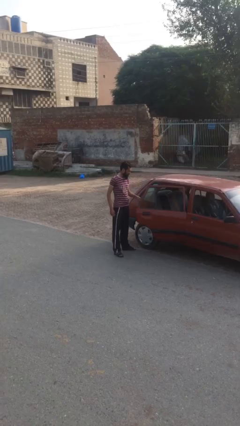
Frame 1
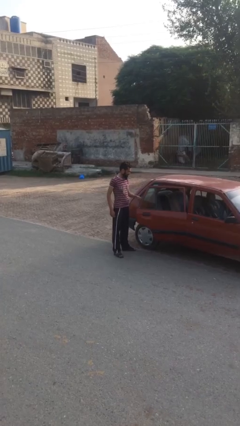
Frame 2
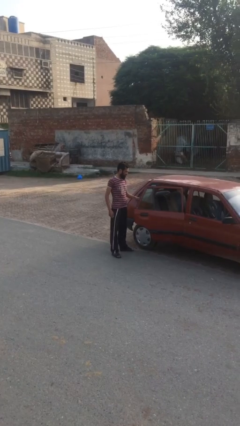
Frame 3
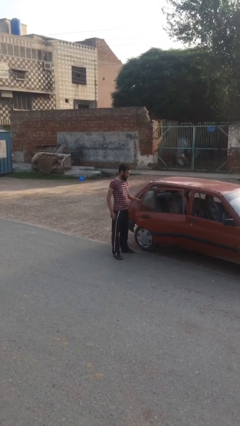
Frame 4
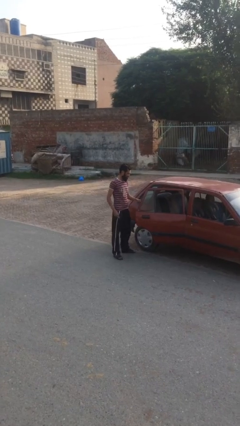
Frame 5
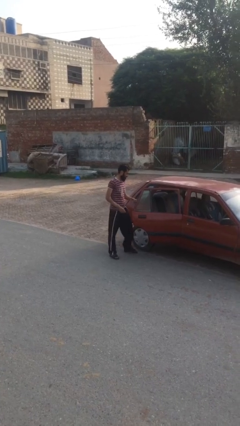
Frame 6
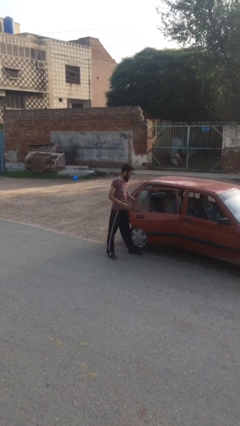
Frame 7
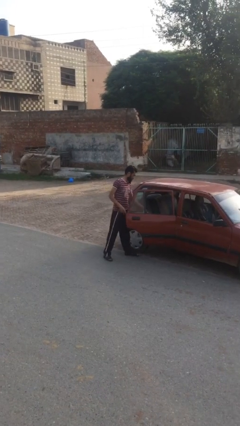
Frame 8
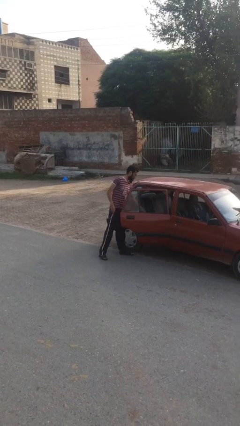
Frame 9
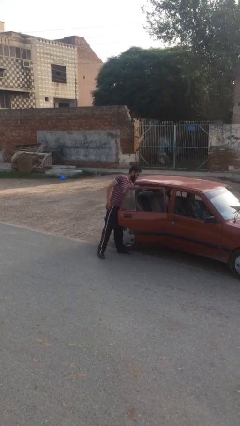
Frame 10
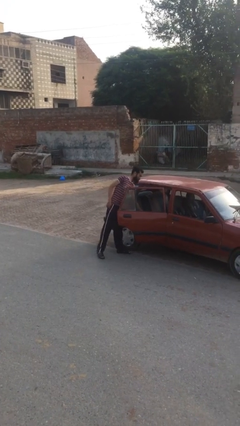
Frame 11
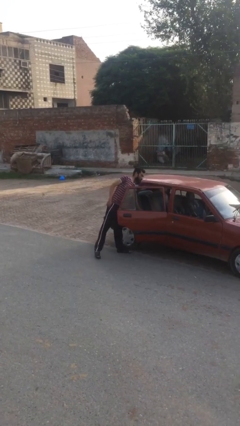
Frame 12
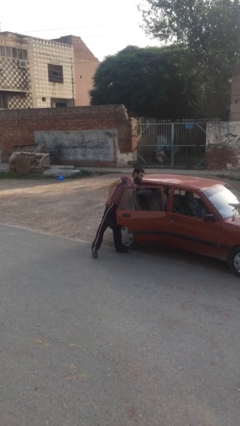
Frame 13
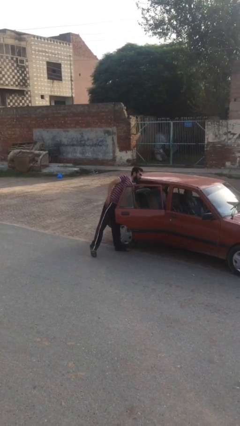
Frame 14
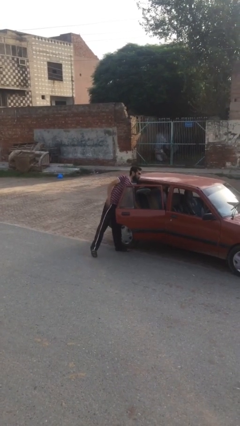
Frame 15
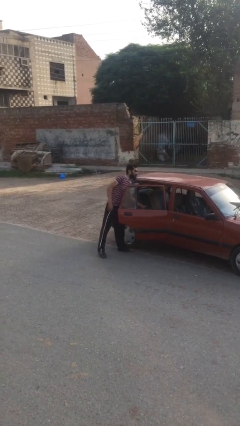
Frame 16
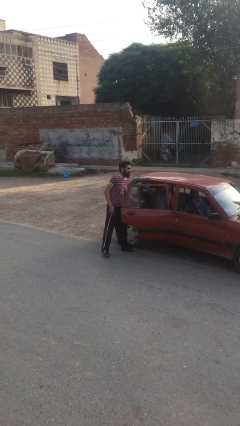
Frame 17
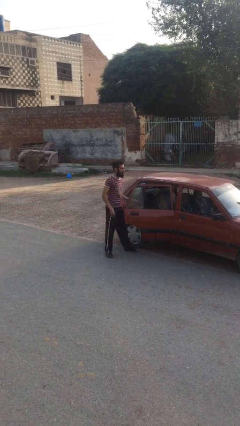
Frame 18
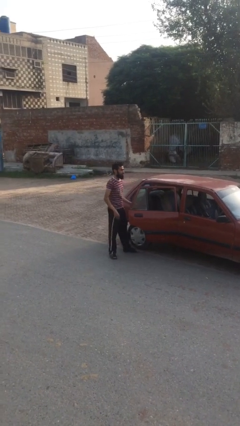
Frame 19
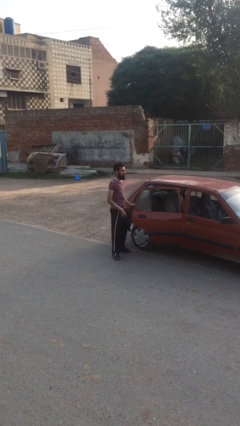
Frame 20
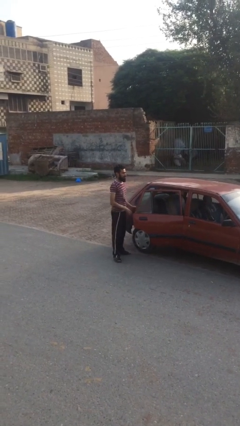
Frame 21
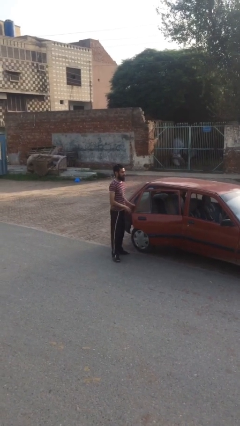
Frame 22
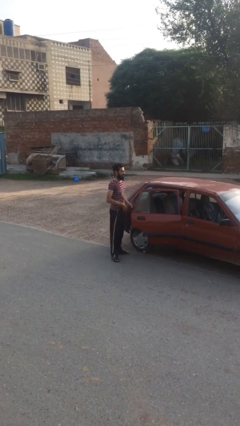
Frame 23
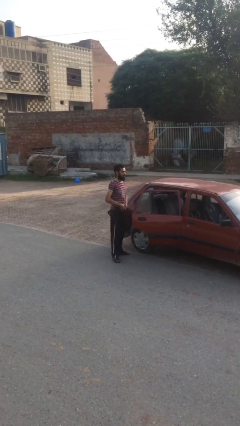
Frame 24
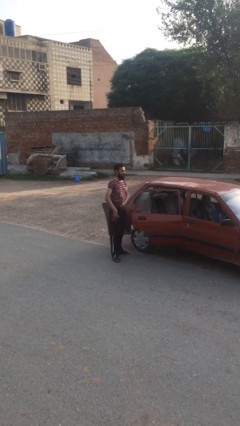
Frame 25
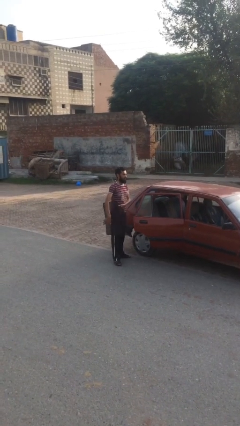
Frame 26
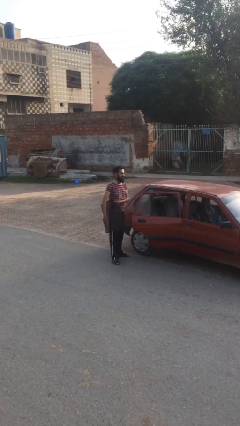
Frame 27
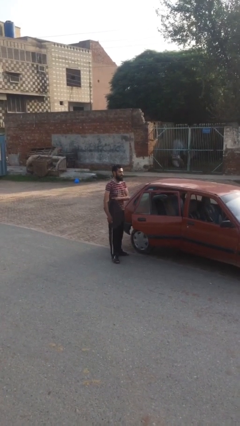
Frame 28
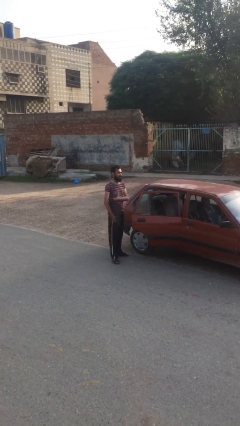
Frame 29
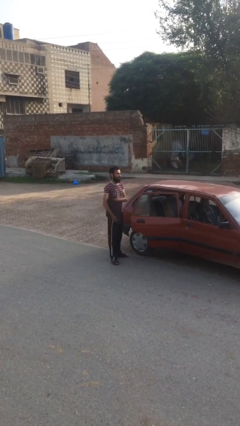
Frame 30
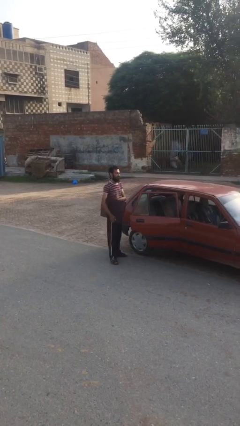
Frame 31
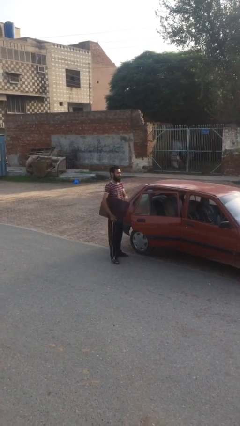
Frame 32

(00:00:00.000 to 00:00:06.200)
person unloads car

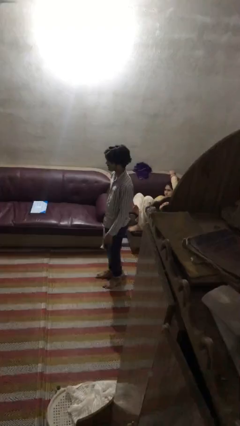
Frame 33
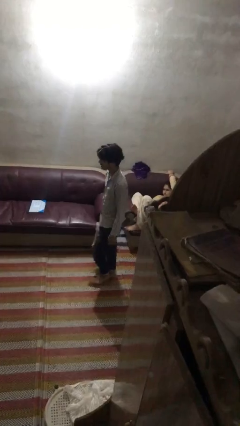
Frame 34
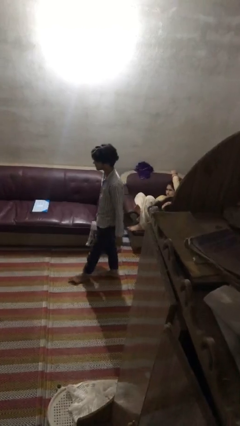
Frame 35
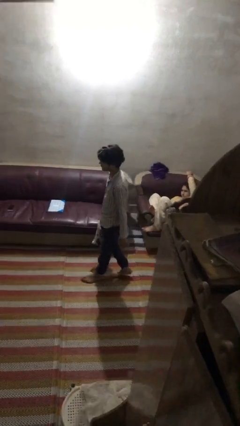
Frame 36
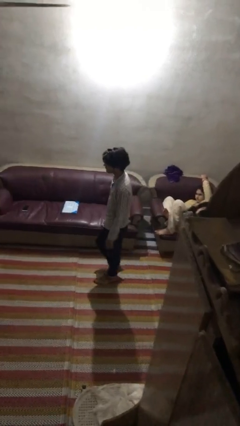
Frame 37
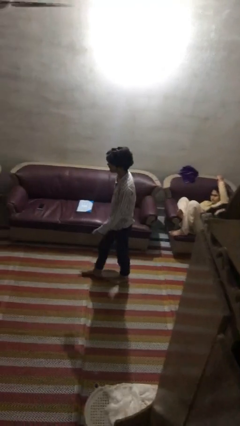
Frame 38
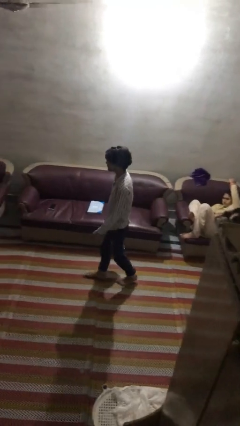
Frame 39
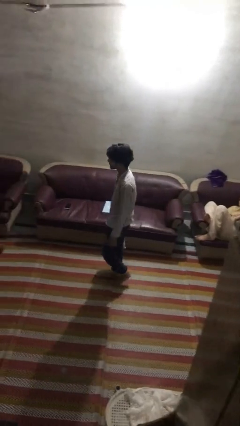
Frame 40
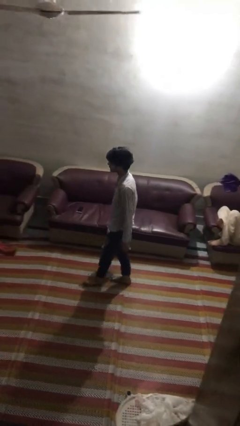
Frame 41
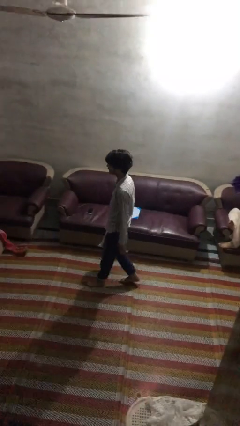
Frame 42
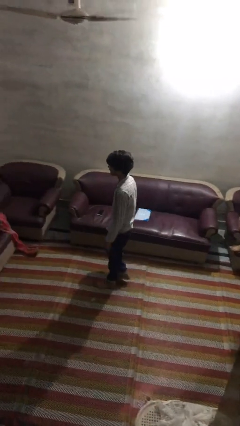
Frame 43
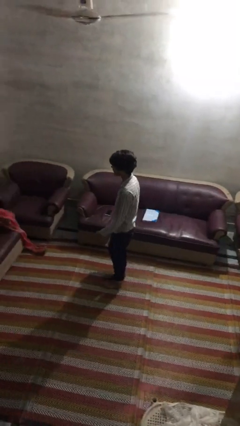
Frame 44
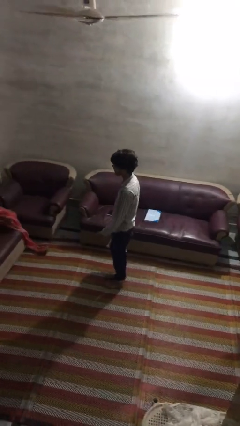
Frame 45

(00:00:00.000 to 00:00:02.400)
person carries groceries

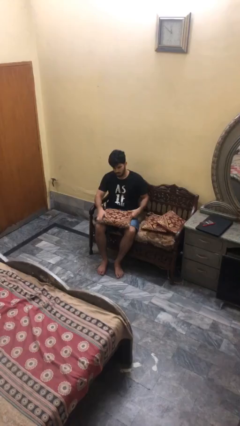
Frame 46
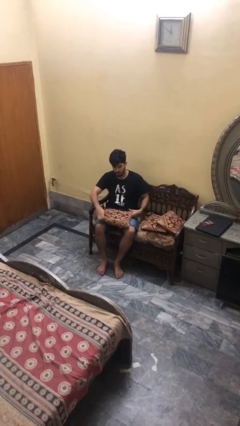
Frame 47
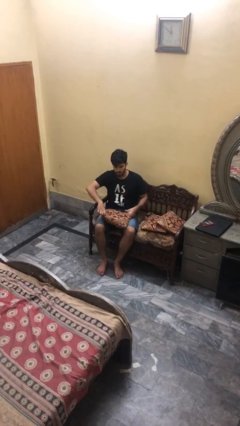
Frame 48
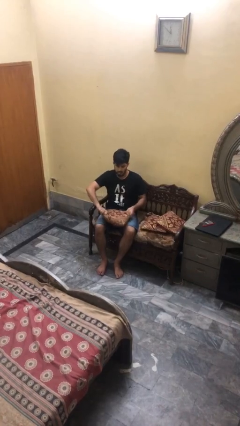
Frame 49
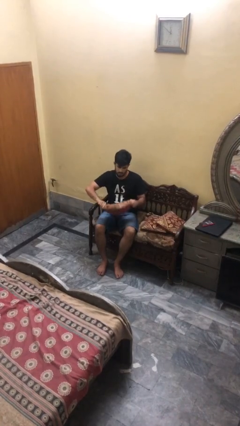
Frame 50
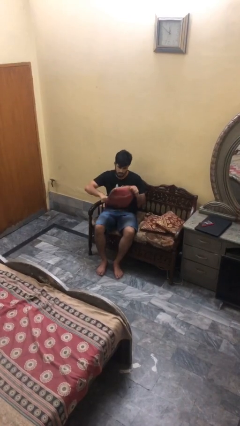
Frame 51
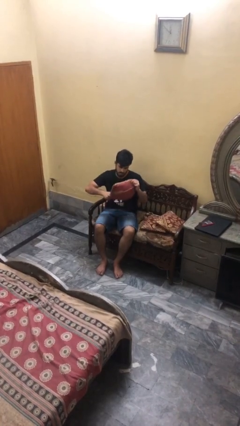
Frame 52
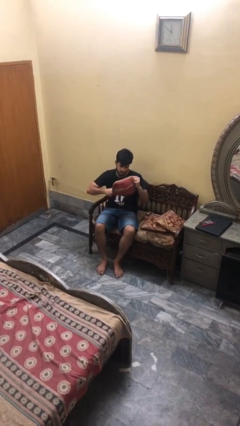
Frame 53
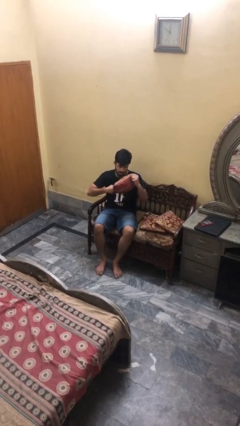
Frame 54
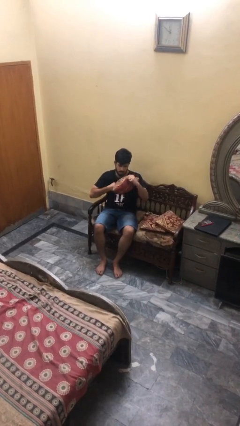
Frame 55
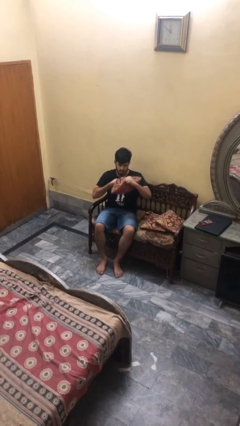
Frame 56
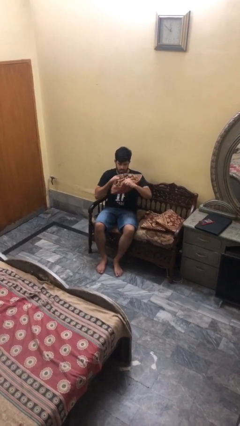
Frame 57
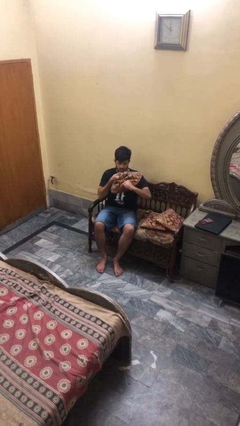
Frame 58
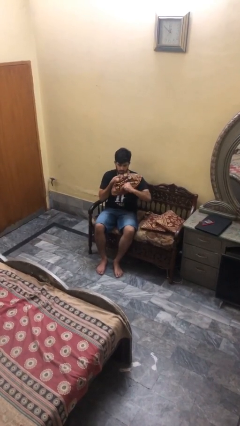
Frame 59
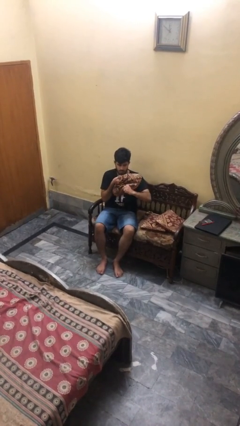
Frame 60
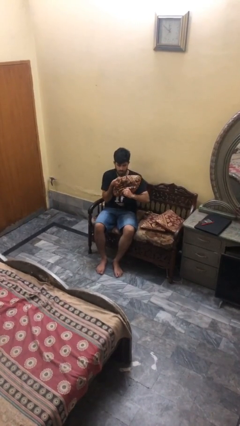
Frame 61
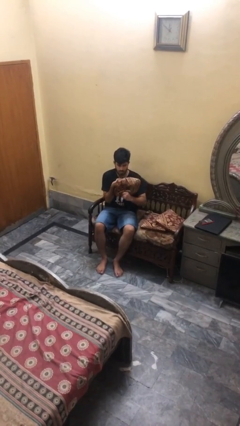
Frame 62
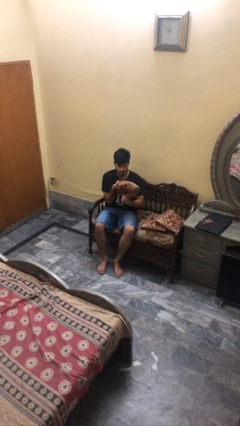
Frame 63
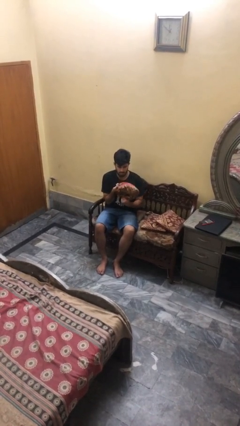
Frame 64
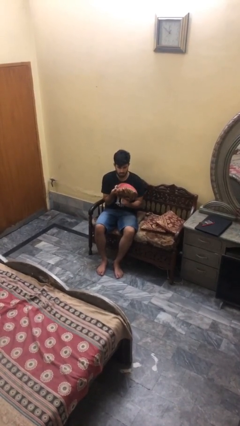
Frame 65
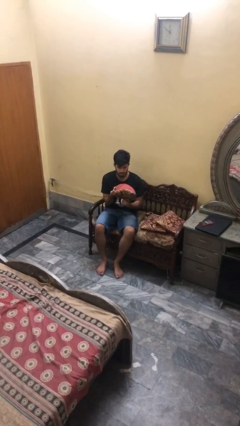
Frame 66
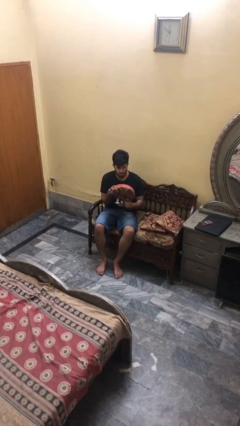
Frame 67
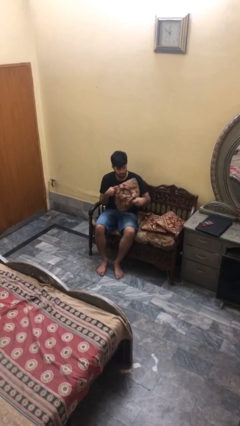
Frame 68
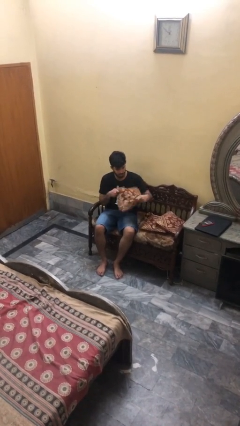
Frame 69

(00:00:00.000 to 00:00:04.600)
person squeezes object

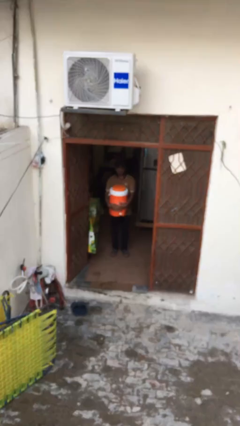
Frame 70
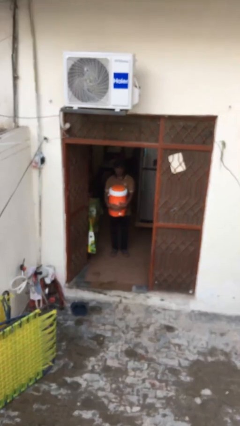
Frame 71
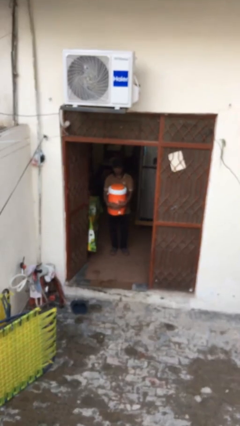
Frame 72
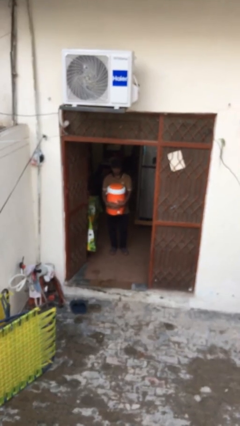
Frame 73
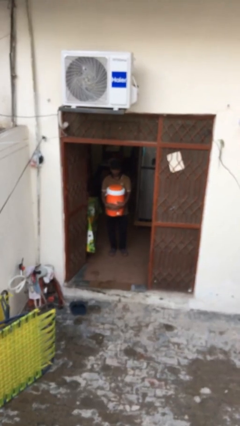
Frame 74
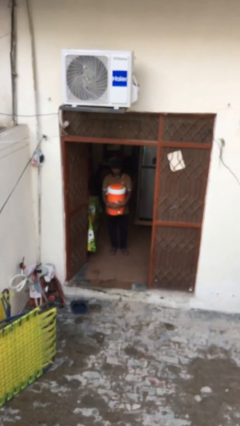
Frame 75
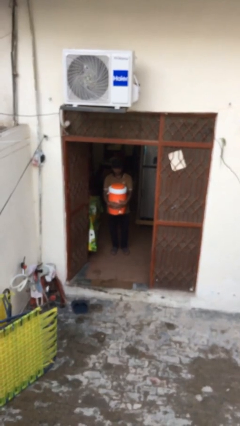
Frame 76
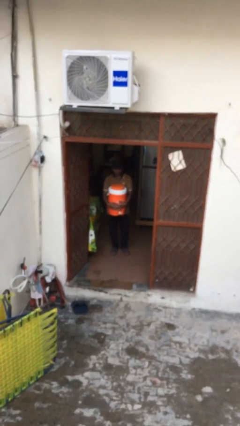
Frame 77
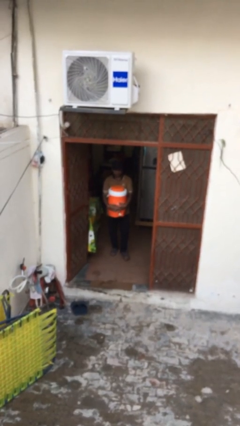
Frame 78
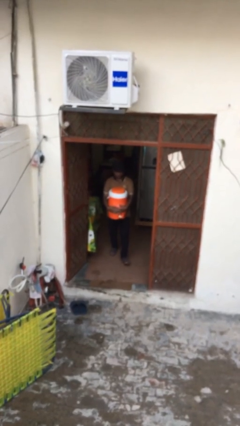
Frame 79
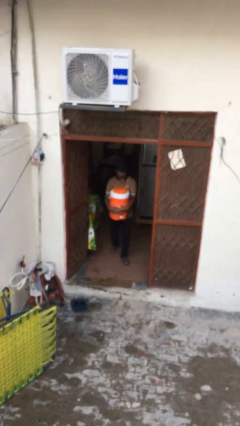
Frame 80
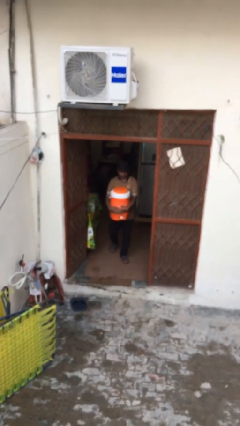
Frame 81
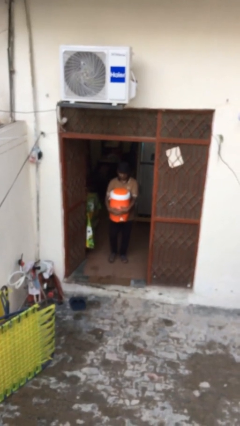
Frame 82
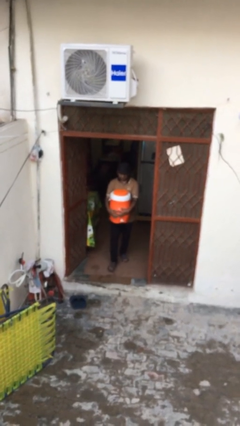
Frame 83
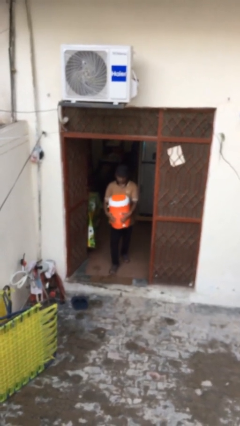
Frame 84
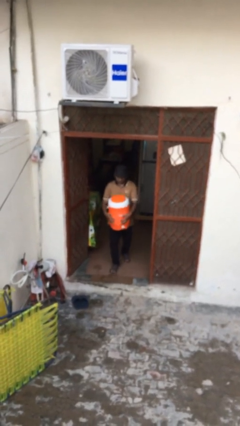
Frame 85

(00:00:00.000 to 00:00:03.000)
person carries heavy object

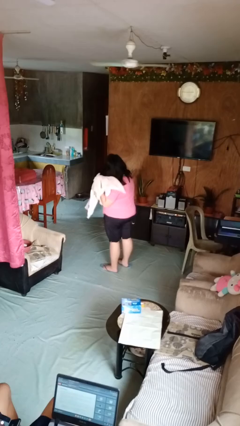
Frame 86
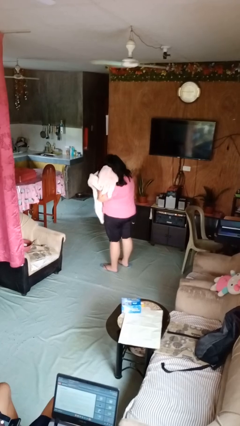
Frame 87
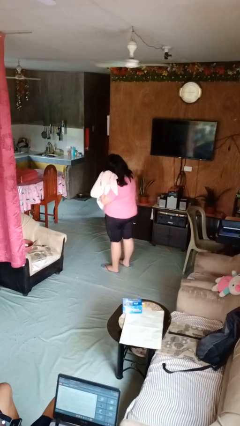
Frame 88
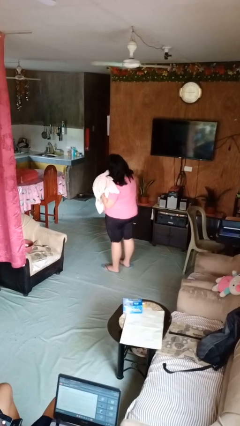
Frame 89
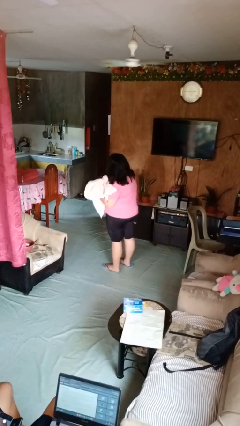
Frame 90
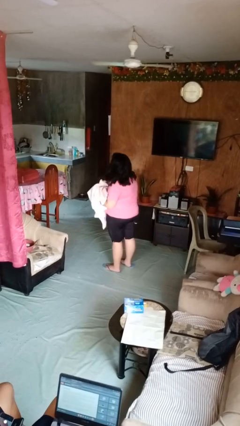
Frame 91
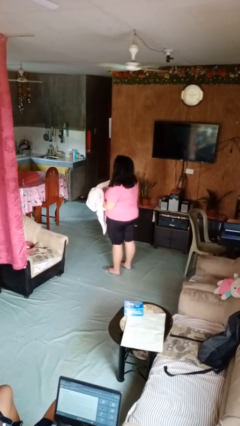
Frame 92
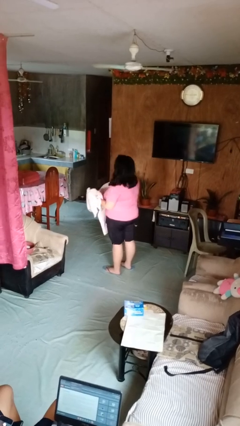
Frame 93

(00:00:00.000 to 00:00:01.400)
person dries hair with towel

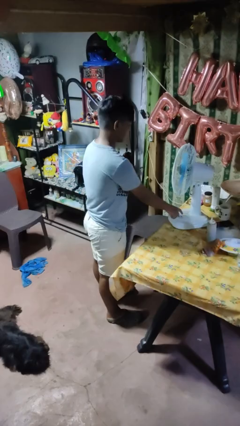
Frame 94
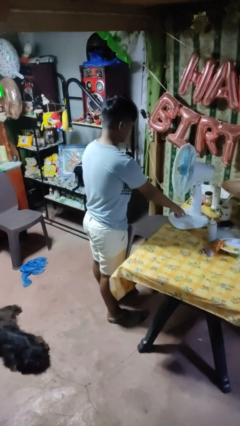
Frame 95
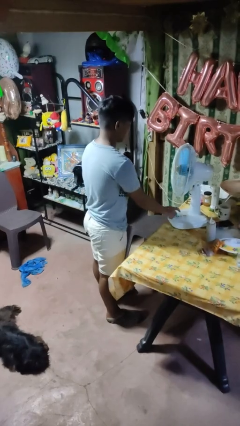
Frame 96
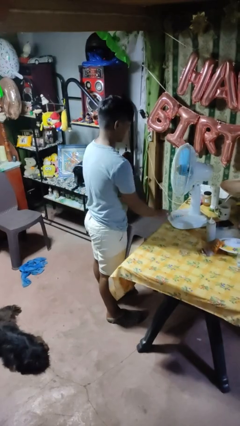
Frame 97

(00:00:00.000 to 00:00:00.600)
person turns off fan
